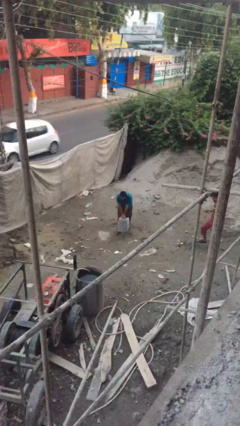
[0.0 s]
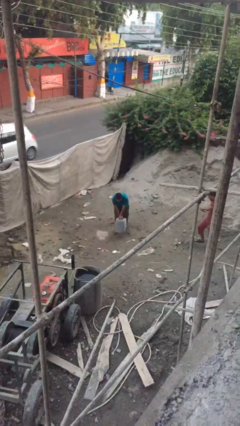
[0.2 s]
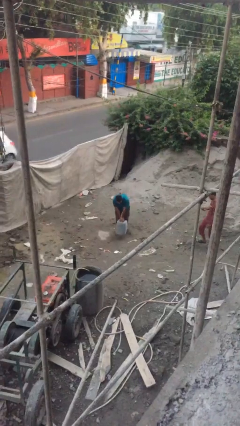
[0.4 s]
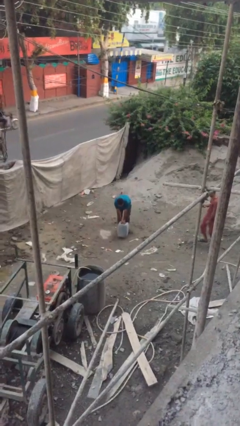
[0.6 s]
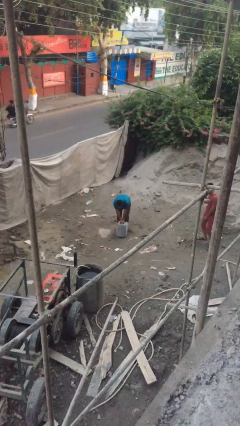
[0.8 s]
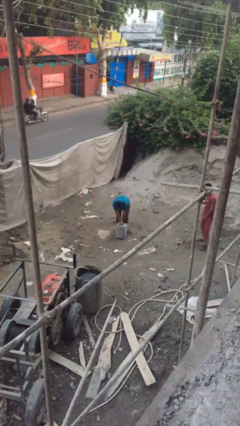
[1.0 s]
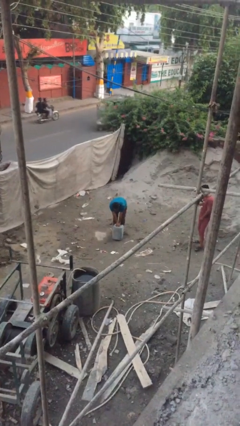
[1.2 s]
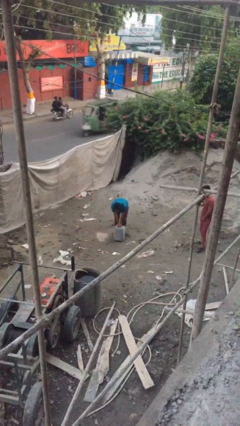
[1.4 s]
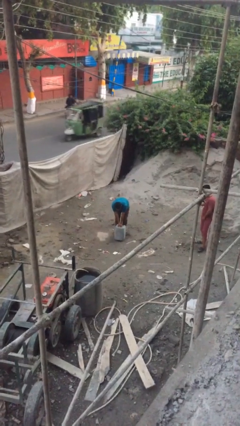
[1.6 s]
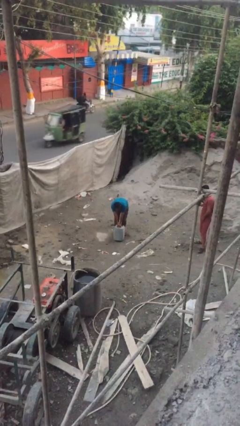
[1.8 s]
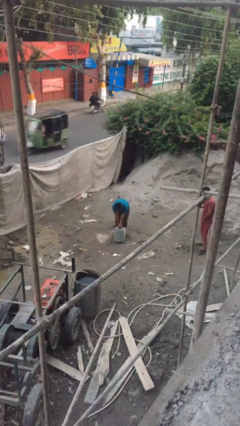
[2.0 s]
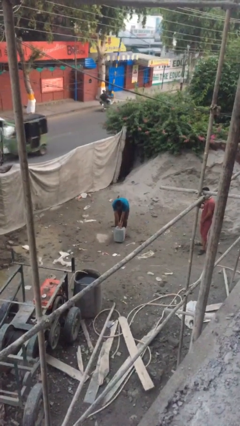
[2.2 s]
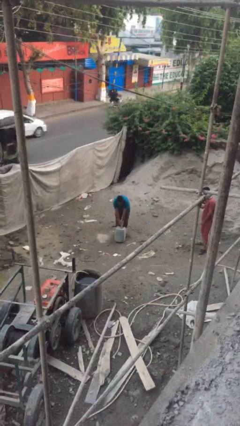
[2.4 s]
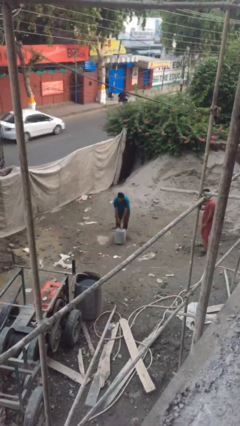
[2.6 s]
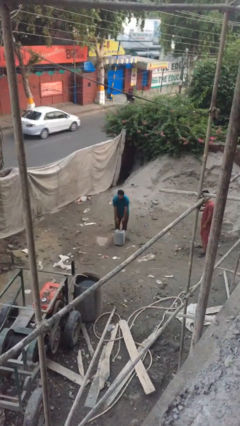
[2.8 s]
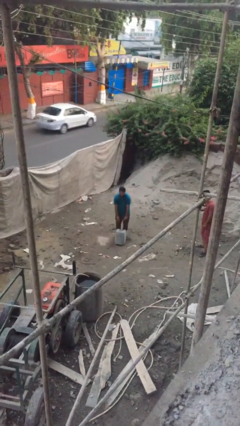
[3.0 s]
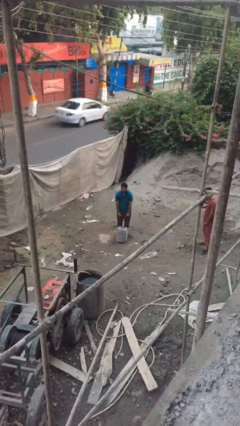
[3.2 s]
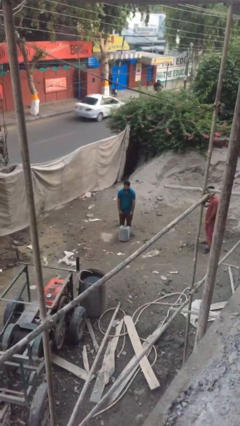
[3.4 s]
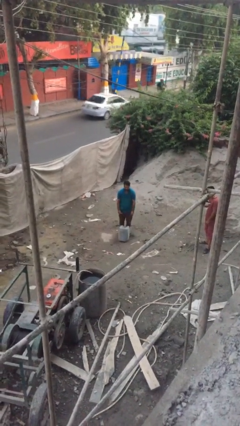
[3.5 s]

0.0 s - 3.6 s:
person puts down object on floor

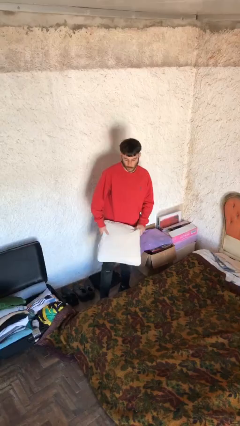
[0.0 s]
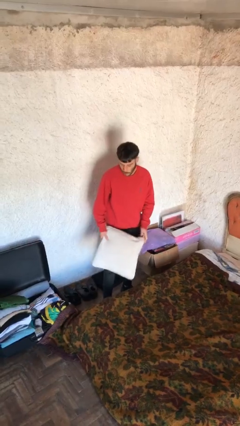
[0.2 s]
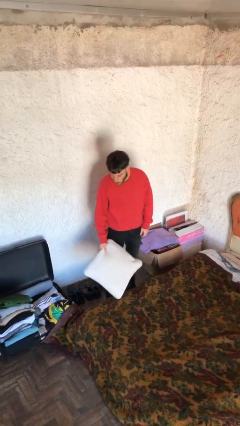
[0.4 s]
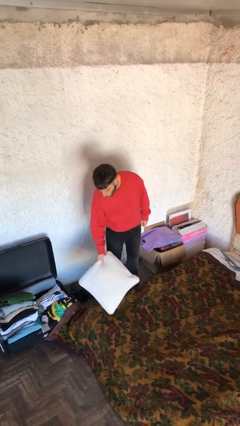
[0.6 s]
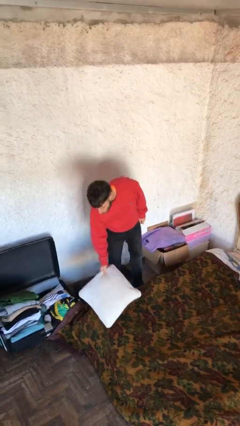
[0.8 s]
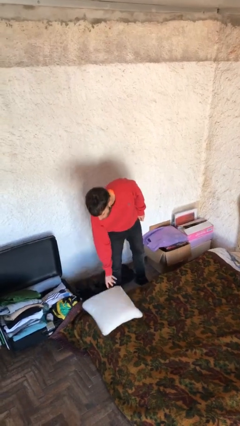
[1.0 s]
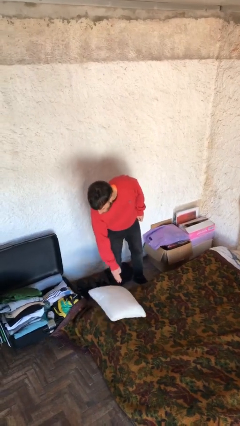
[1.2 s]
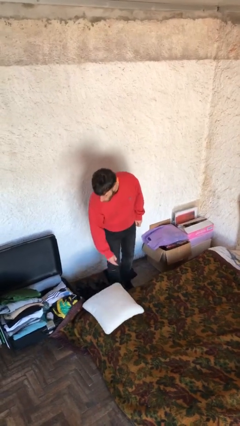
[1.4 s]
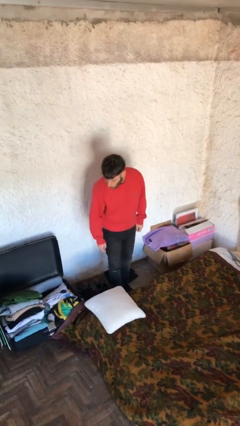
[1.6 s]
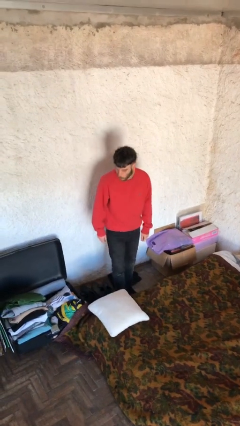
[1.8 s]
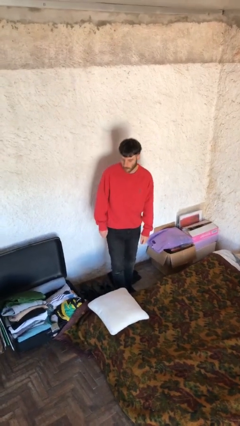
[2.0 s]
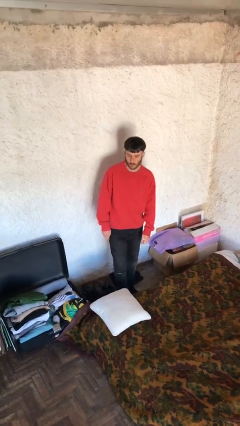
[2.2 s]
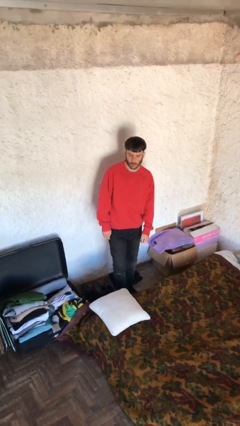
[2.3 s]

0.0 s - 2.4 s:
person puts down object on bed

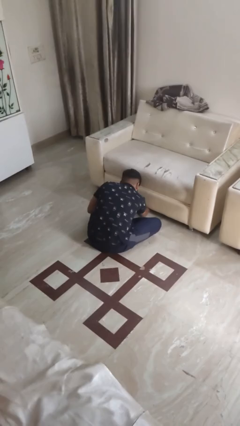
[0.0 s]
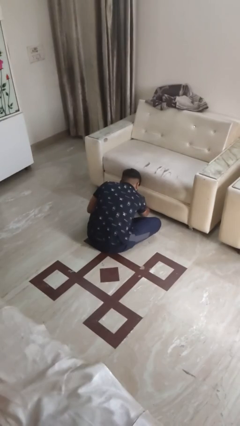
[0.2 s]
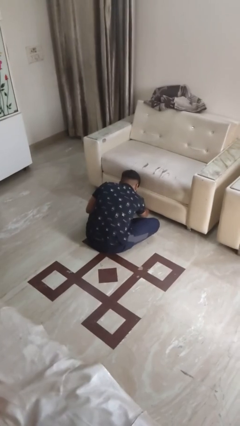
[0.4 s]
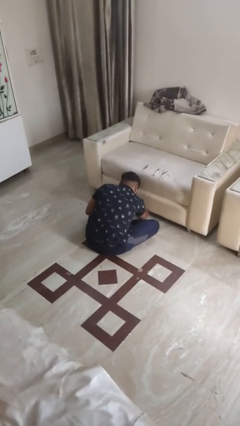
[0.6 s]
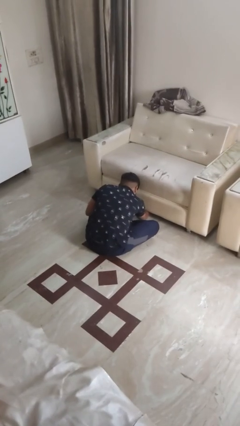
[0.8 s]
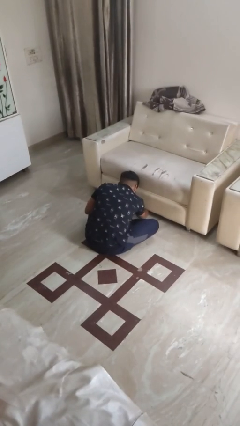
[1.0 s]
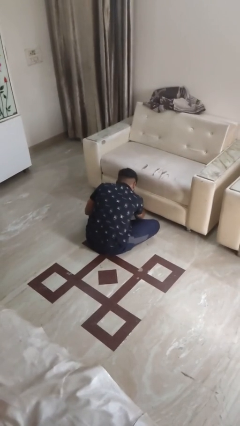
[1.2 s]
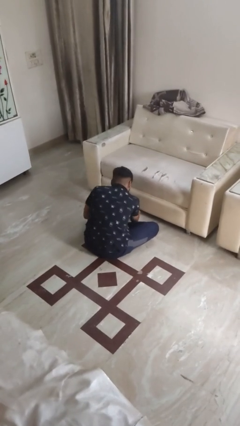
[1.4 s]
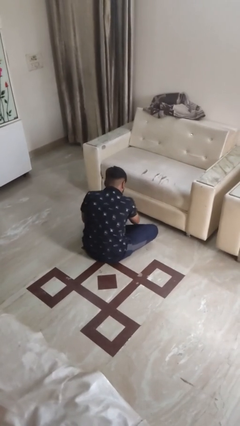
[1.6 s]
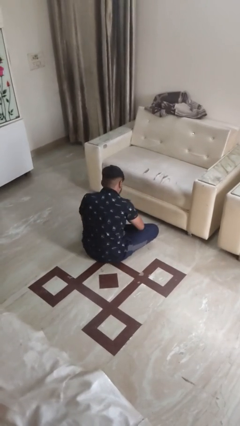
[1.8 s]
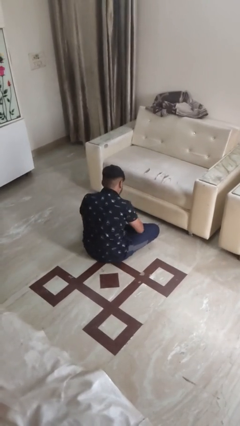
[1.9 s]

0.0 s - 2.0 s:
person searches under couch

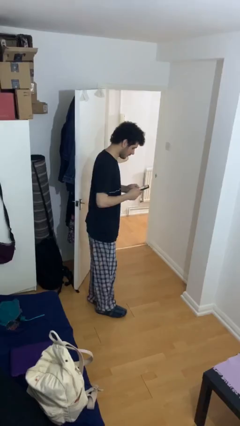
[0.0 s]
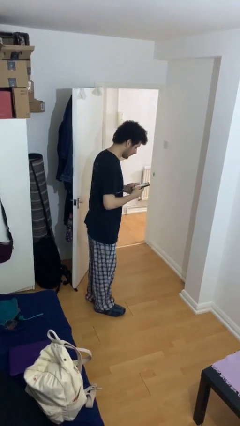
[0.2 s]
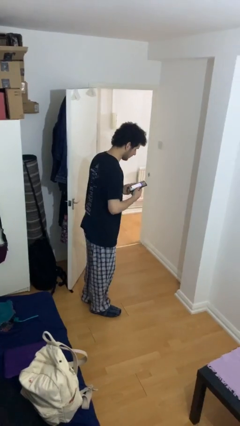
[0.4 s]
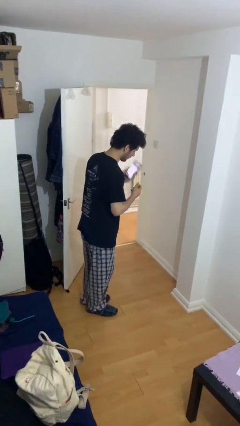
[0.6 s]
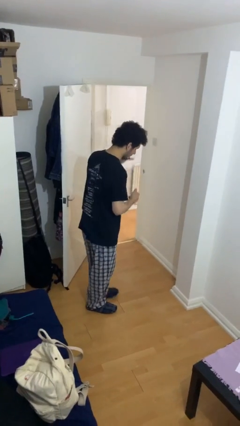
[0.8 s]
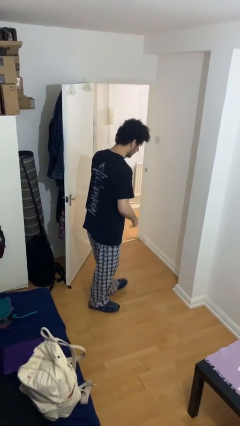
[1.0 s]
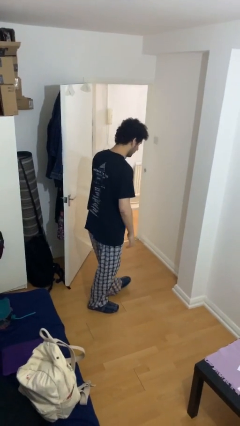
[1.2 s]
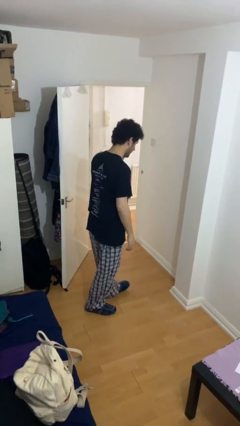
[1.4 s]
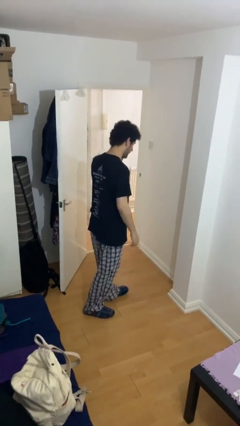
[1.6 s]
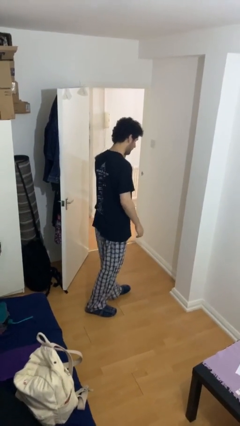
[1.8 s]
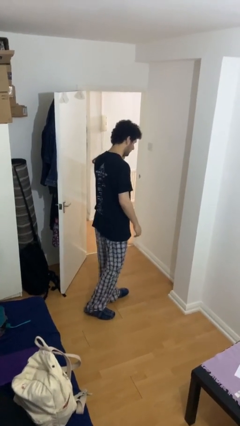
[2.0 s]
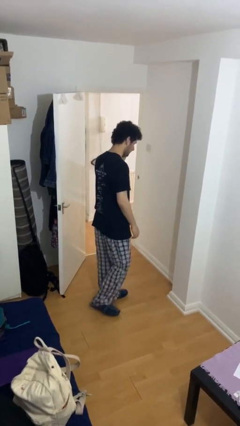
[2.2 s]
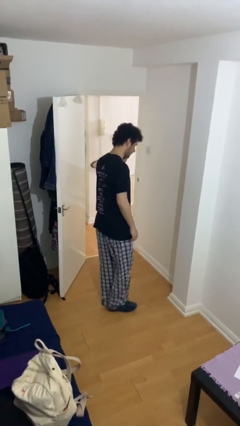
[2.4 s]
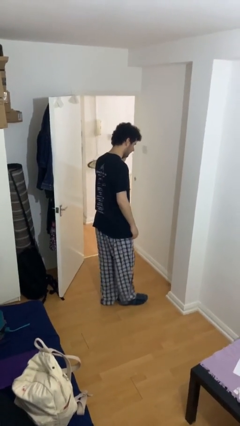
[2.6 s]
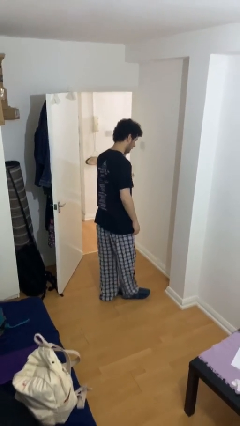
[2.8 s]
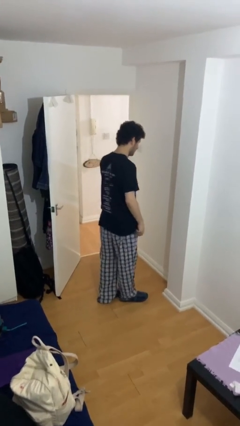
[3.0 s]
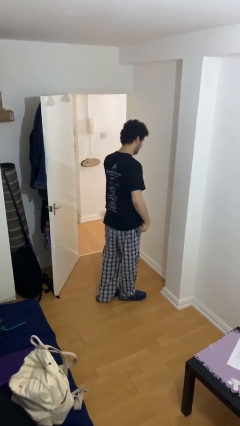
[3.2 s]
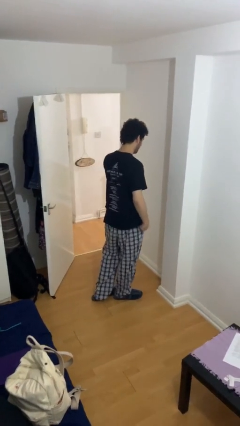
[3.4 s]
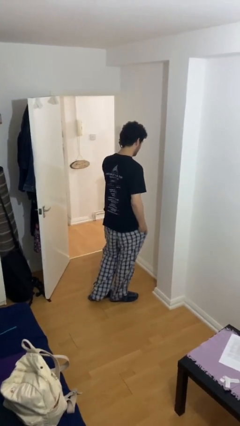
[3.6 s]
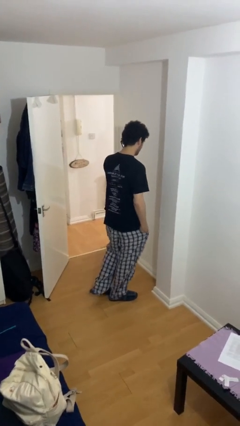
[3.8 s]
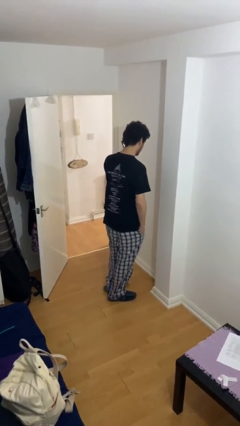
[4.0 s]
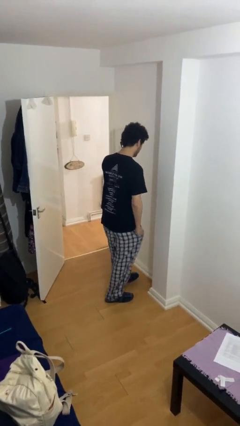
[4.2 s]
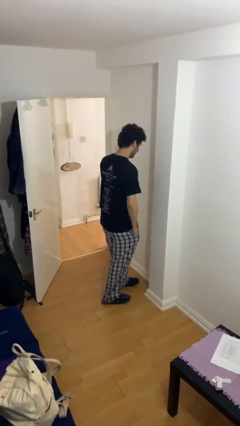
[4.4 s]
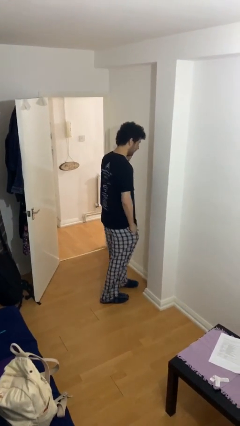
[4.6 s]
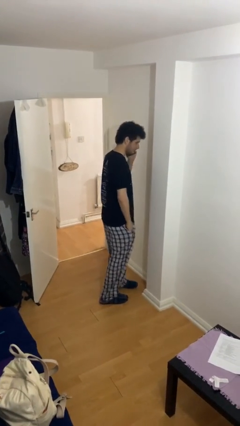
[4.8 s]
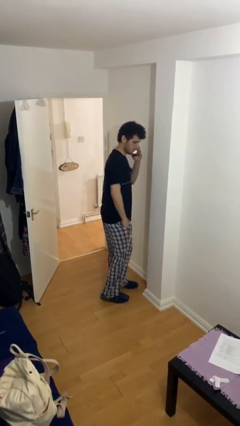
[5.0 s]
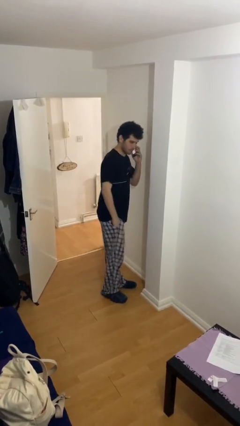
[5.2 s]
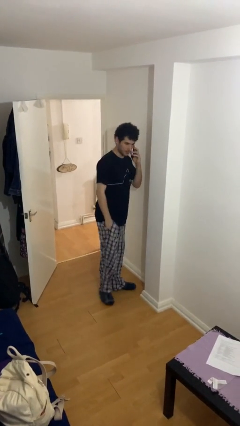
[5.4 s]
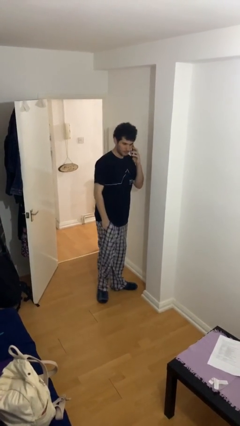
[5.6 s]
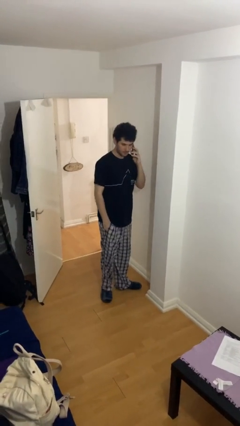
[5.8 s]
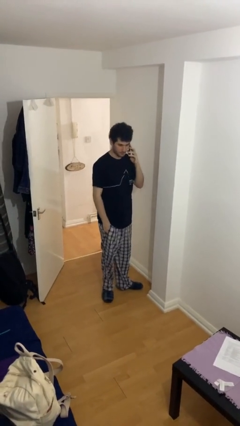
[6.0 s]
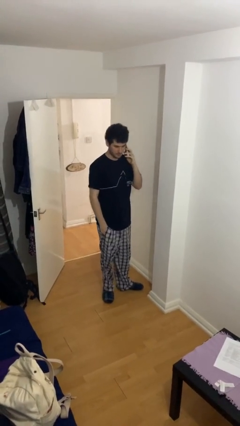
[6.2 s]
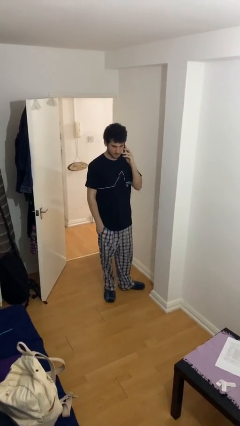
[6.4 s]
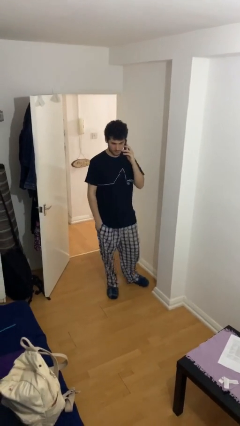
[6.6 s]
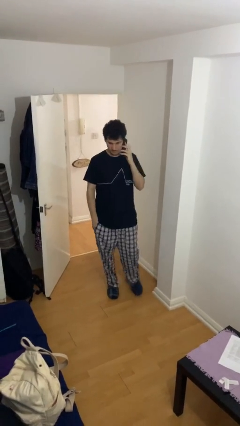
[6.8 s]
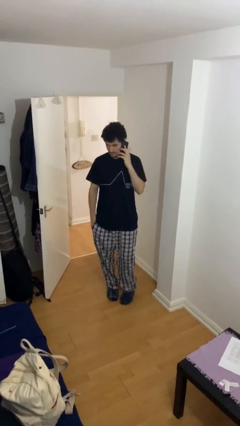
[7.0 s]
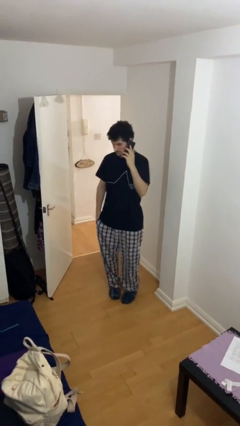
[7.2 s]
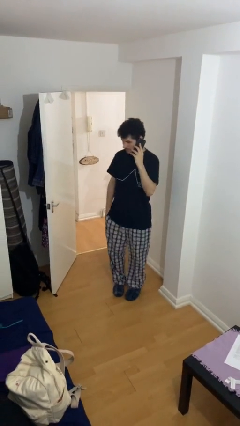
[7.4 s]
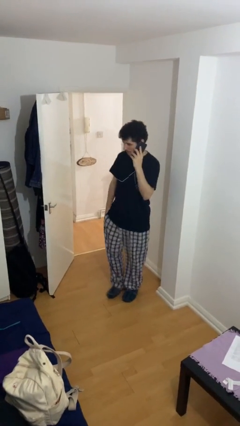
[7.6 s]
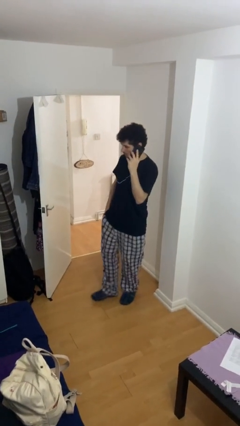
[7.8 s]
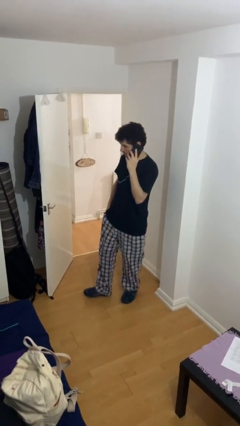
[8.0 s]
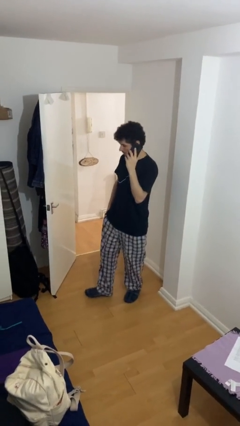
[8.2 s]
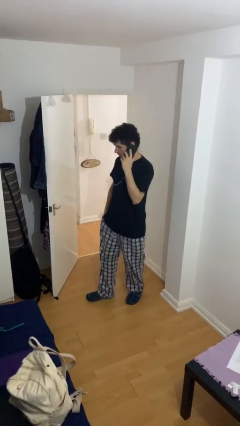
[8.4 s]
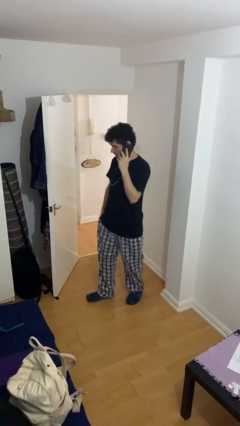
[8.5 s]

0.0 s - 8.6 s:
person talks on phone

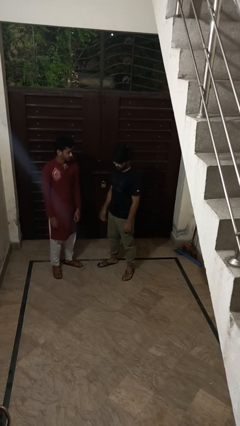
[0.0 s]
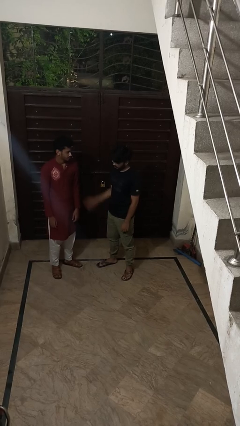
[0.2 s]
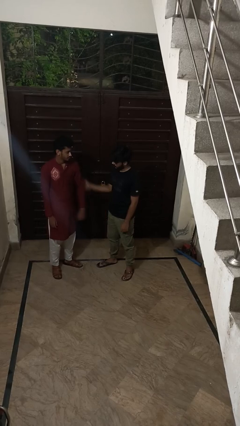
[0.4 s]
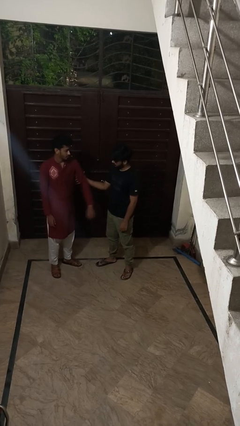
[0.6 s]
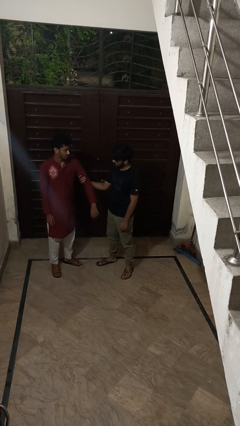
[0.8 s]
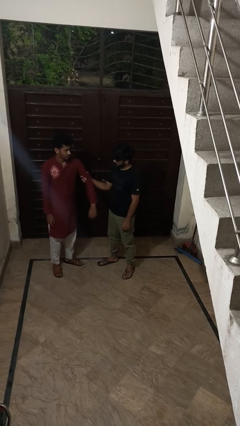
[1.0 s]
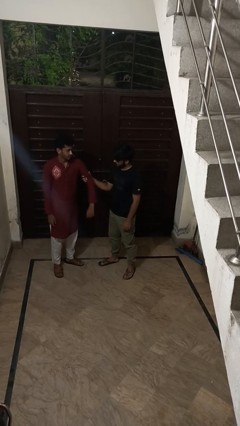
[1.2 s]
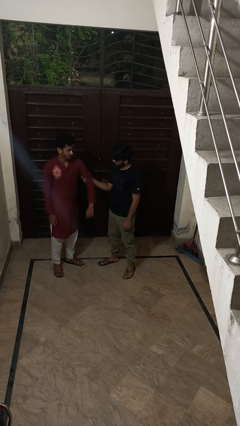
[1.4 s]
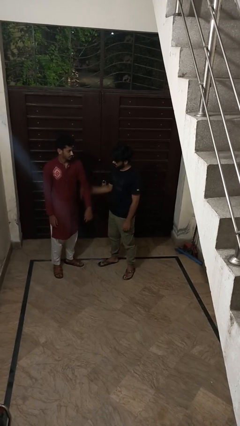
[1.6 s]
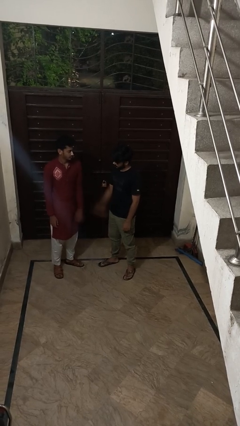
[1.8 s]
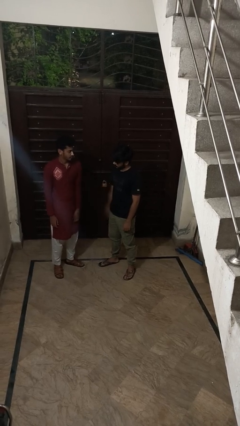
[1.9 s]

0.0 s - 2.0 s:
person grabs person by bicep
